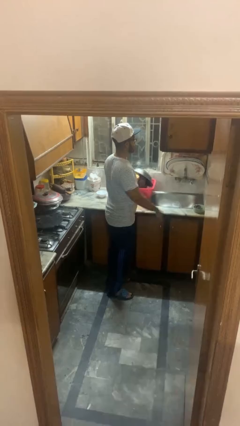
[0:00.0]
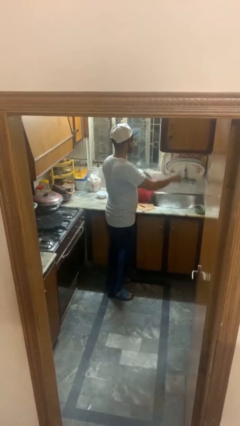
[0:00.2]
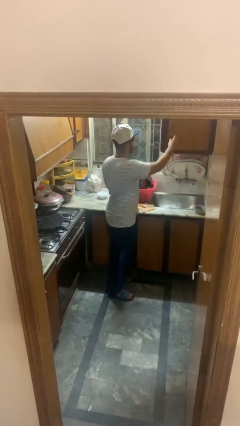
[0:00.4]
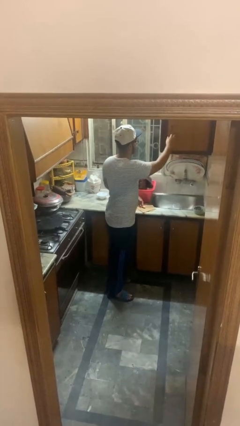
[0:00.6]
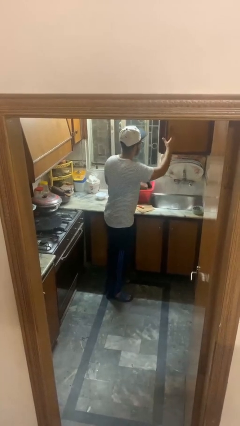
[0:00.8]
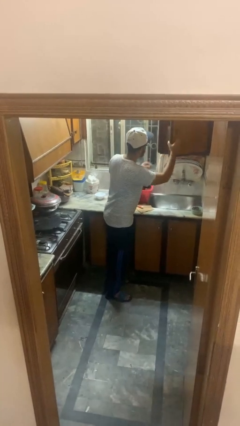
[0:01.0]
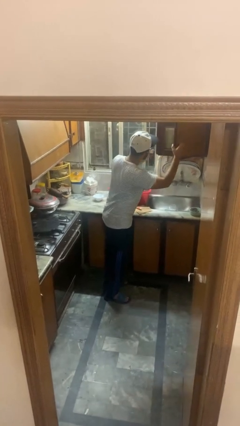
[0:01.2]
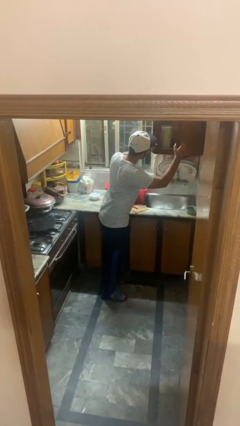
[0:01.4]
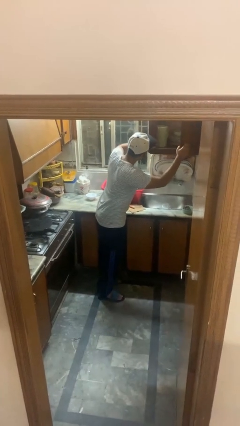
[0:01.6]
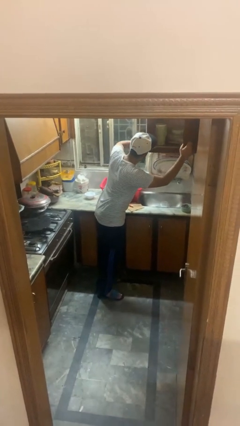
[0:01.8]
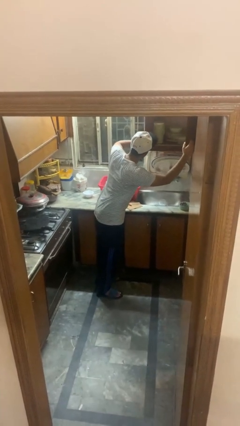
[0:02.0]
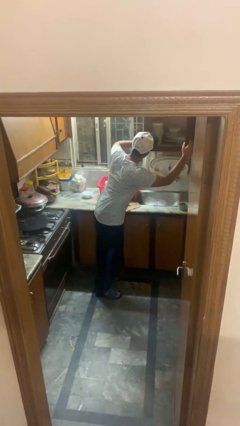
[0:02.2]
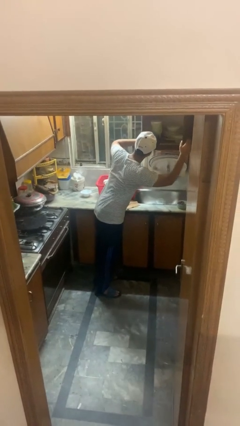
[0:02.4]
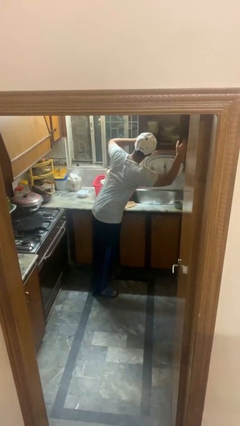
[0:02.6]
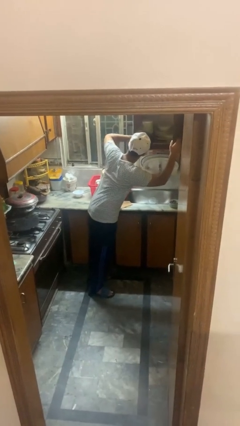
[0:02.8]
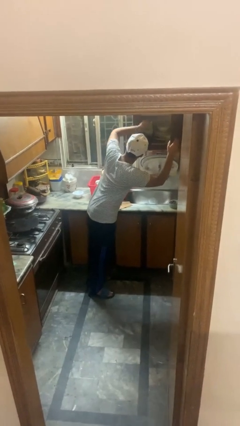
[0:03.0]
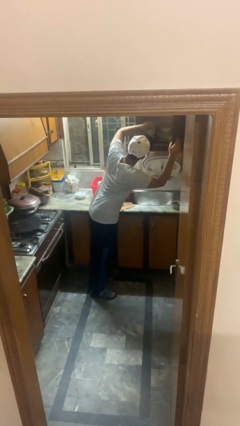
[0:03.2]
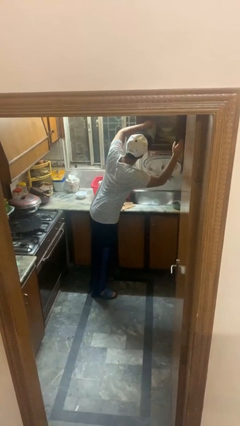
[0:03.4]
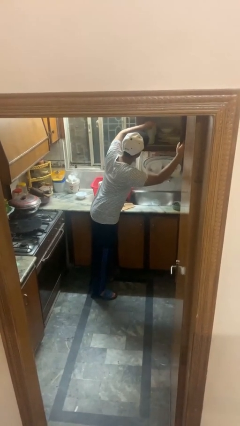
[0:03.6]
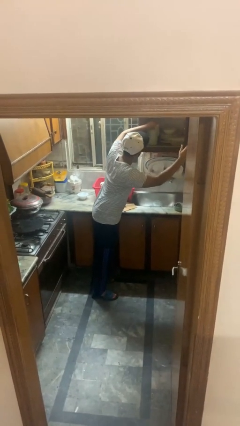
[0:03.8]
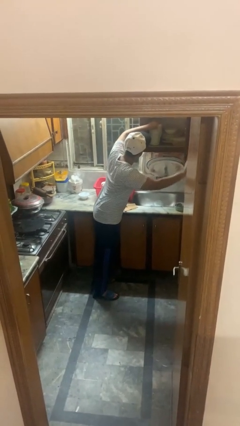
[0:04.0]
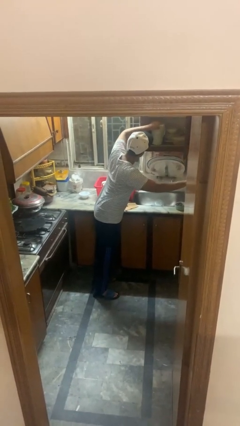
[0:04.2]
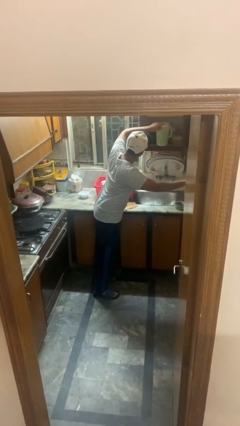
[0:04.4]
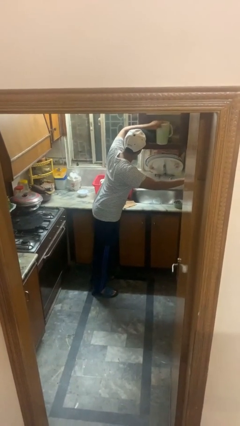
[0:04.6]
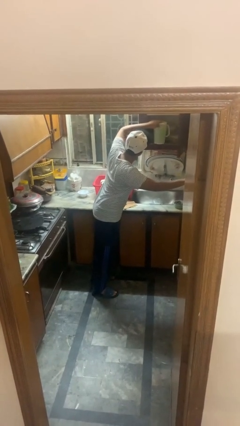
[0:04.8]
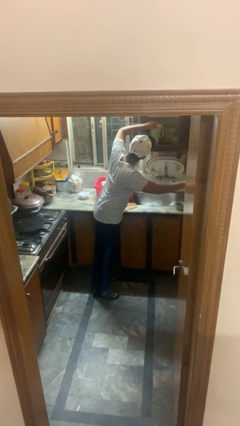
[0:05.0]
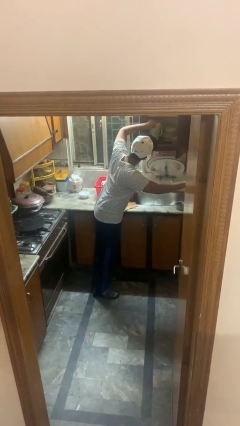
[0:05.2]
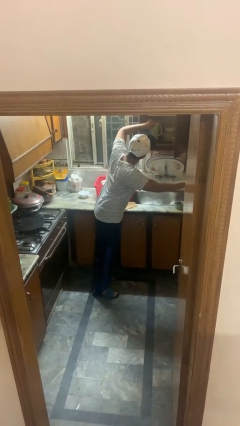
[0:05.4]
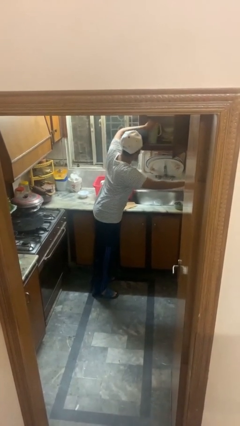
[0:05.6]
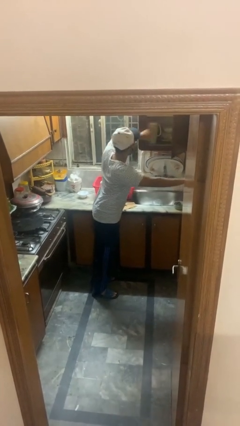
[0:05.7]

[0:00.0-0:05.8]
person searches in kitchen drawer

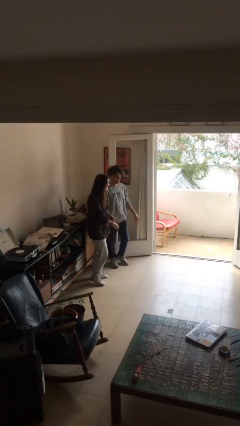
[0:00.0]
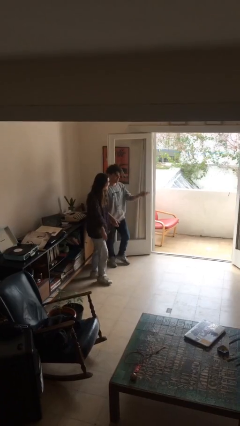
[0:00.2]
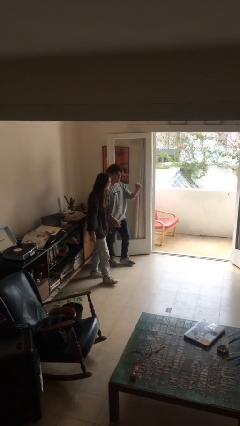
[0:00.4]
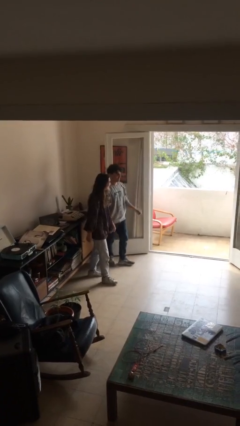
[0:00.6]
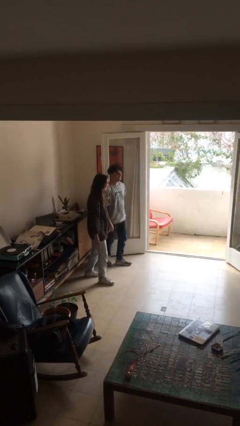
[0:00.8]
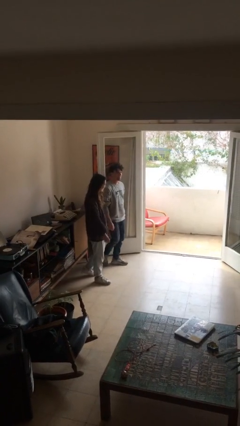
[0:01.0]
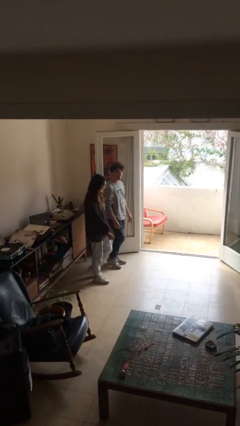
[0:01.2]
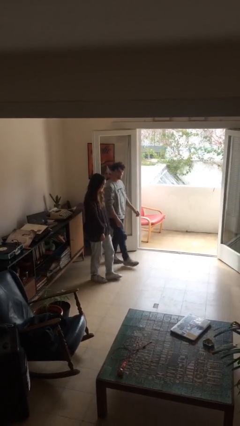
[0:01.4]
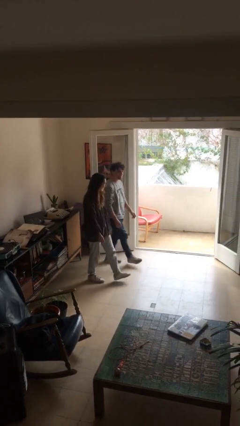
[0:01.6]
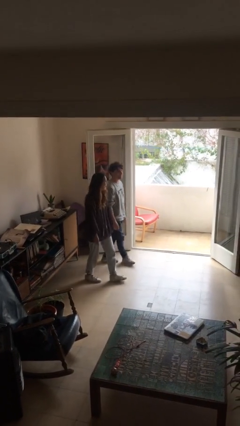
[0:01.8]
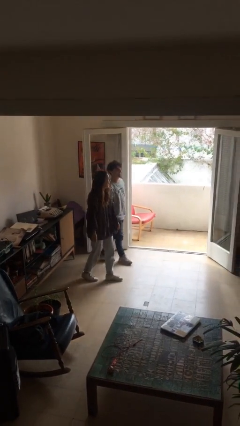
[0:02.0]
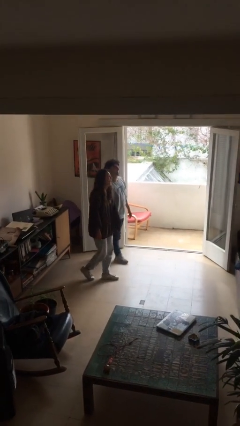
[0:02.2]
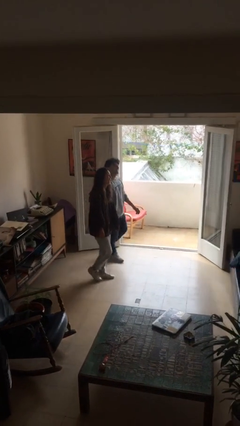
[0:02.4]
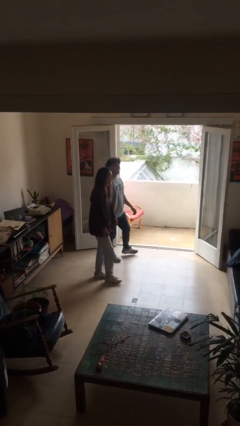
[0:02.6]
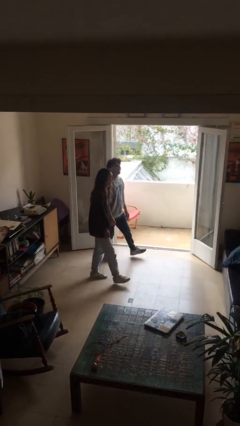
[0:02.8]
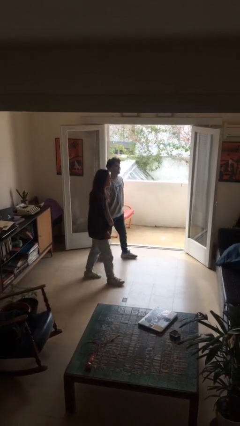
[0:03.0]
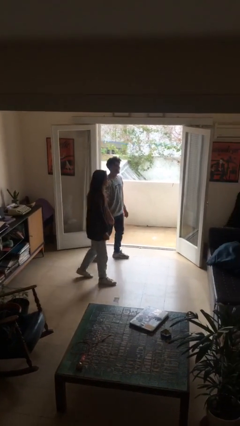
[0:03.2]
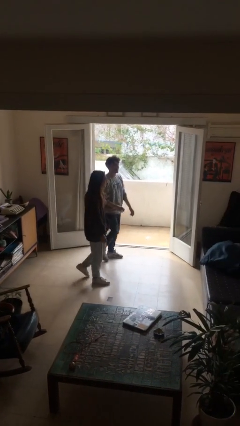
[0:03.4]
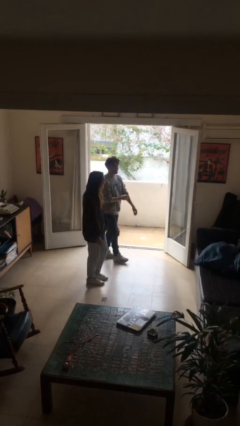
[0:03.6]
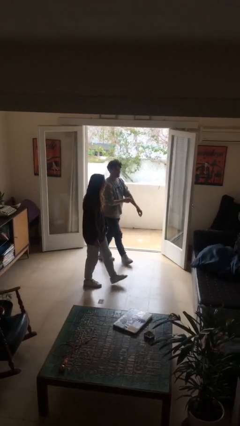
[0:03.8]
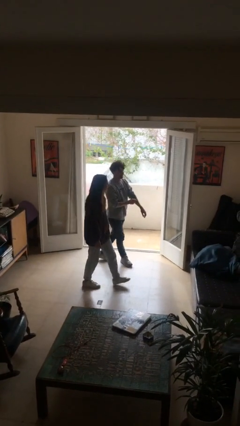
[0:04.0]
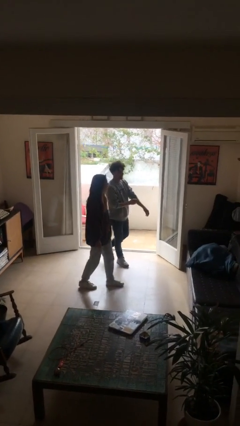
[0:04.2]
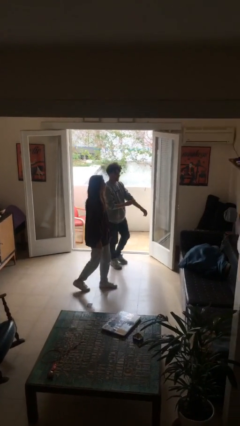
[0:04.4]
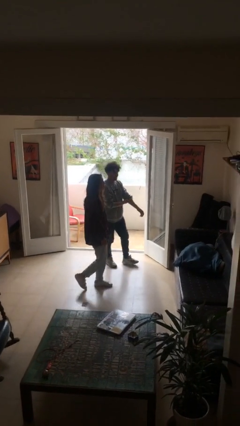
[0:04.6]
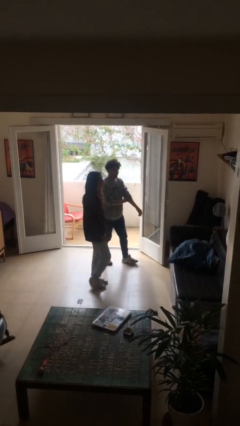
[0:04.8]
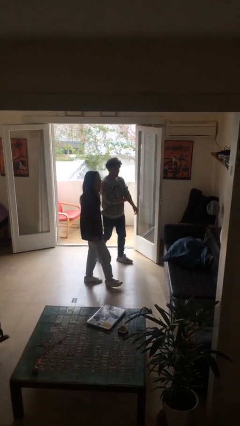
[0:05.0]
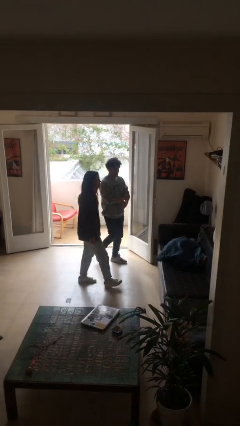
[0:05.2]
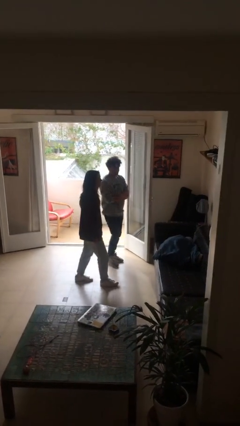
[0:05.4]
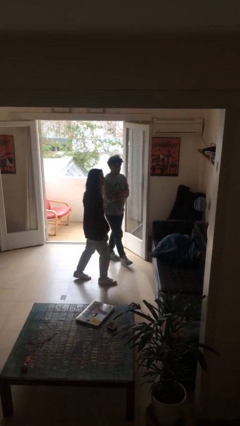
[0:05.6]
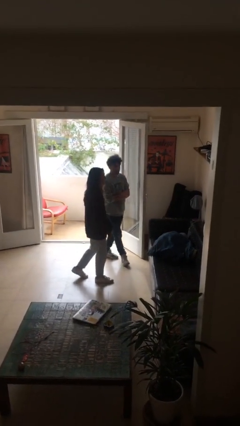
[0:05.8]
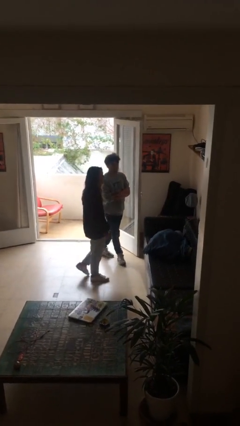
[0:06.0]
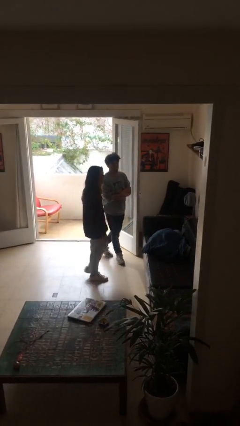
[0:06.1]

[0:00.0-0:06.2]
person talks to person

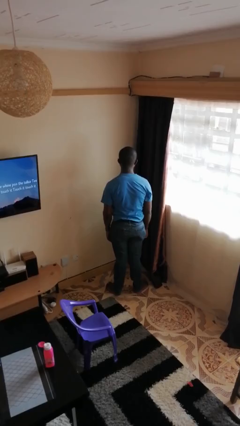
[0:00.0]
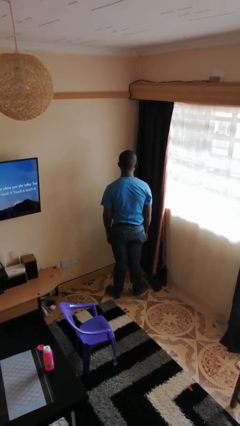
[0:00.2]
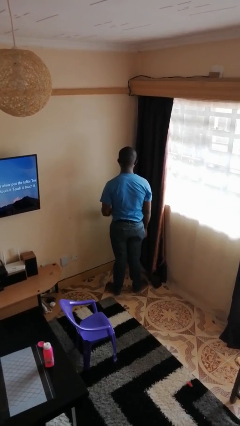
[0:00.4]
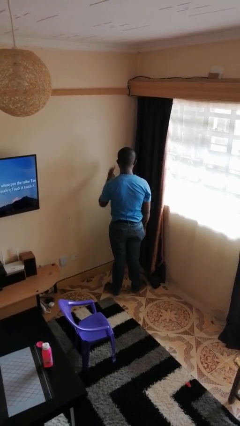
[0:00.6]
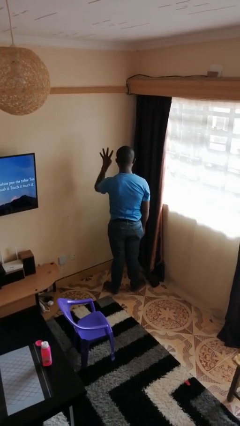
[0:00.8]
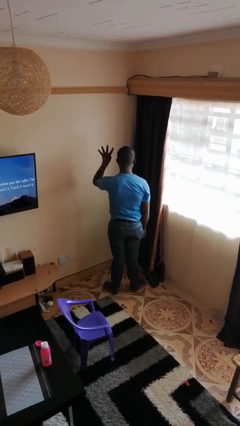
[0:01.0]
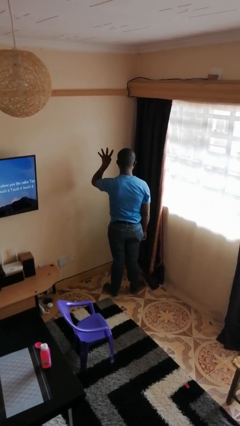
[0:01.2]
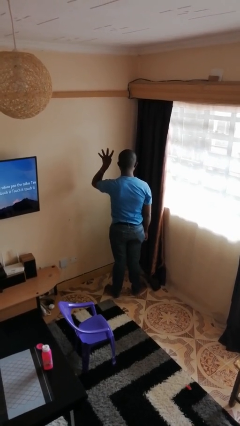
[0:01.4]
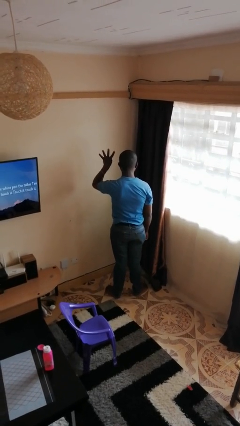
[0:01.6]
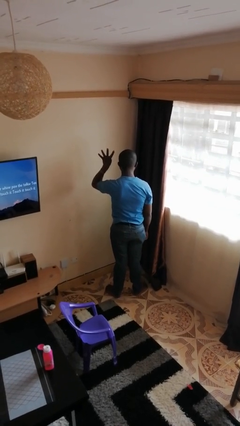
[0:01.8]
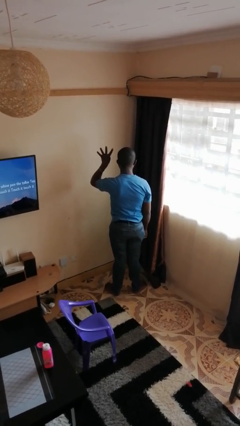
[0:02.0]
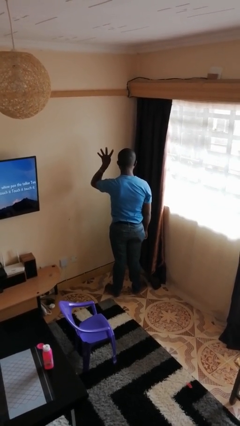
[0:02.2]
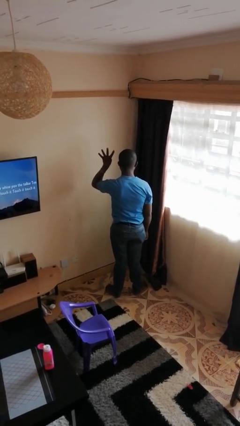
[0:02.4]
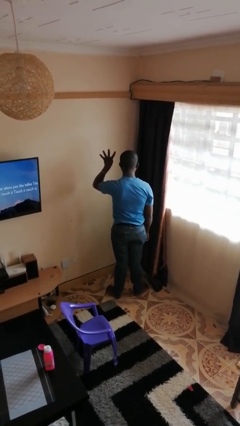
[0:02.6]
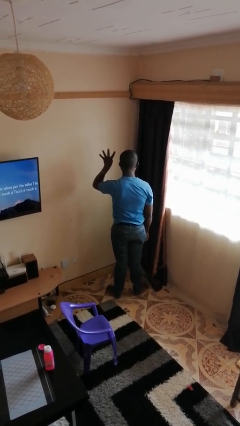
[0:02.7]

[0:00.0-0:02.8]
person gestures number four

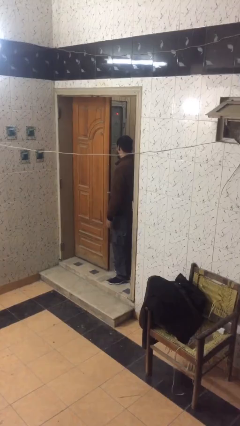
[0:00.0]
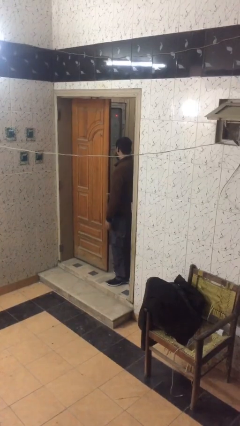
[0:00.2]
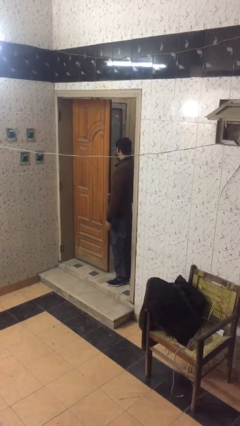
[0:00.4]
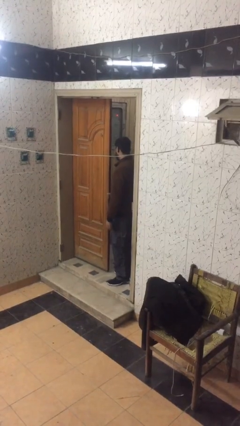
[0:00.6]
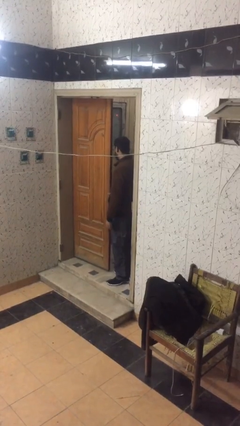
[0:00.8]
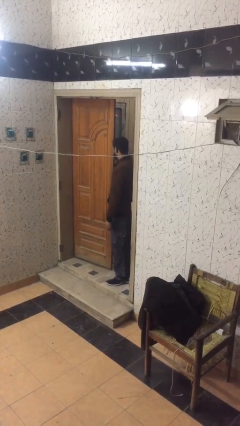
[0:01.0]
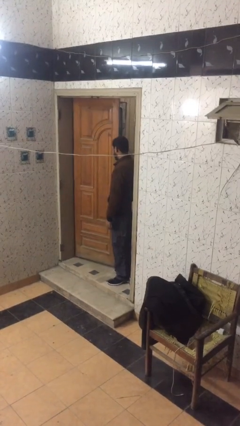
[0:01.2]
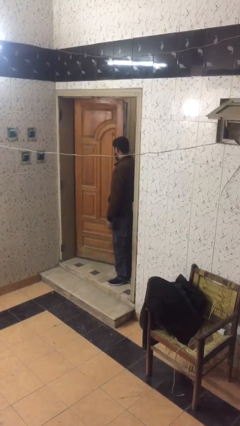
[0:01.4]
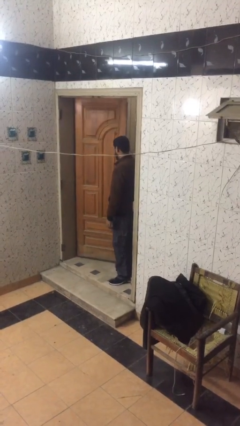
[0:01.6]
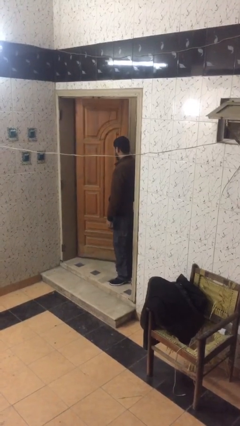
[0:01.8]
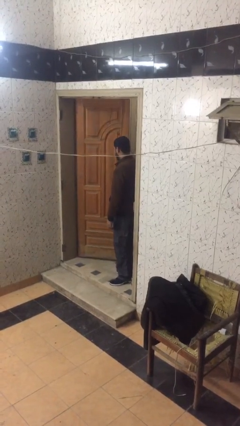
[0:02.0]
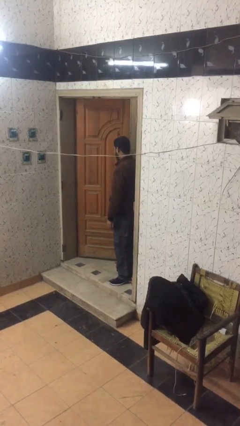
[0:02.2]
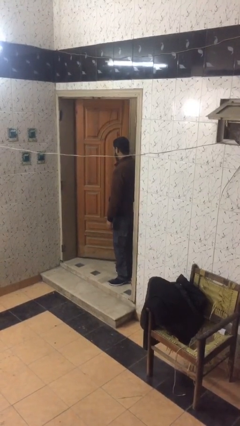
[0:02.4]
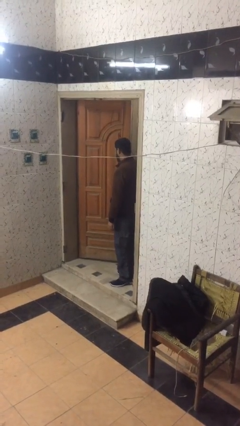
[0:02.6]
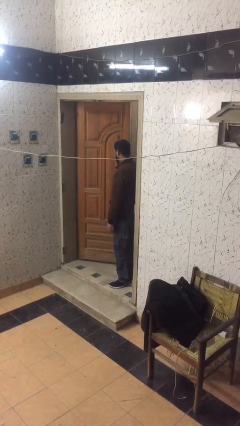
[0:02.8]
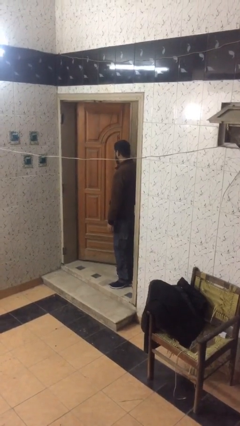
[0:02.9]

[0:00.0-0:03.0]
person opens facility door
